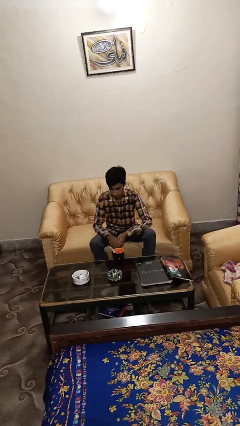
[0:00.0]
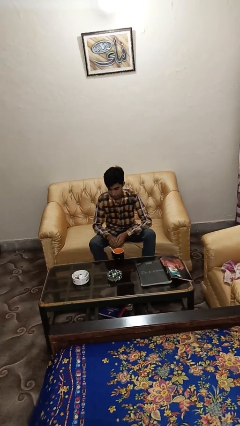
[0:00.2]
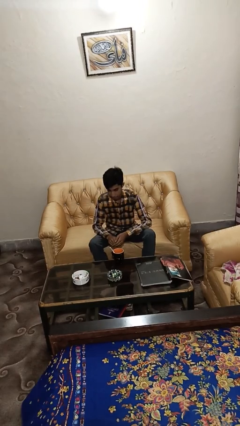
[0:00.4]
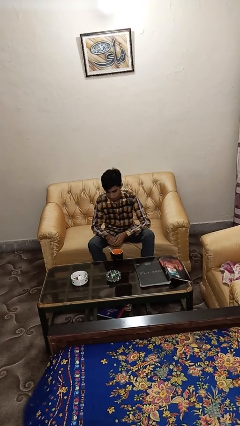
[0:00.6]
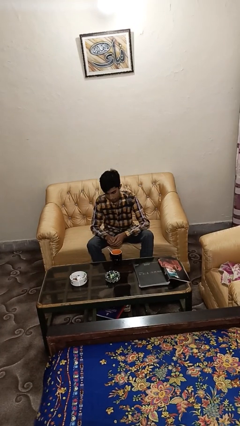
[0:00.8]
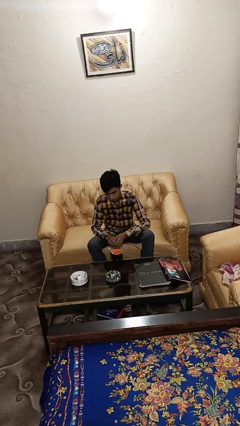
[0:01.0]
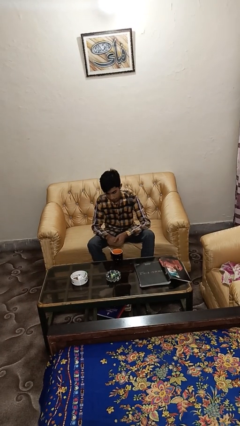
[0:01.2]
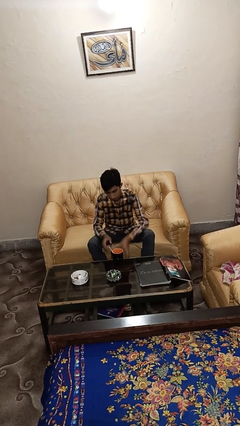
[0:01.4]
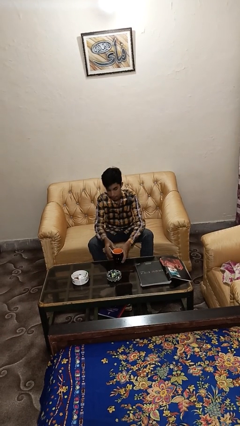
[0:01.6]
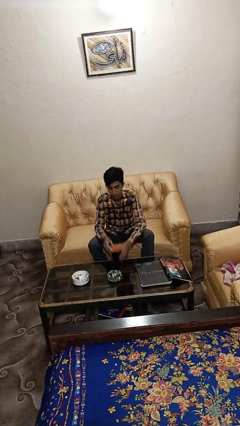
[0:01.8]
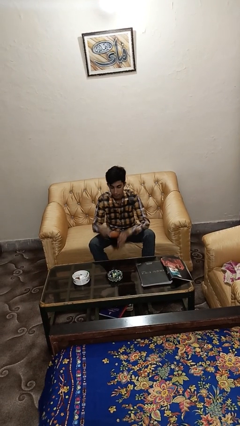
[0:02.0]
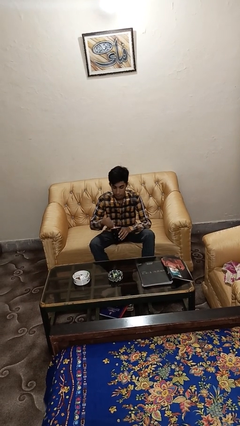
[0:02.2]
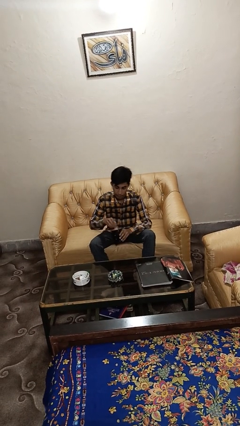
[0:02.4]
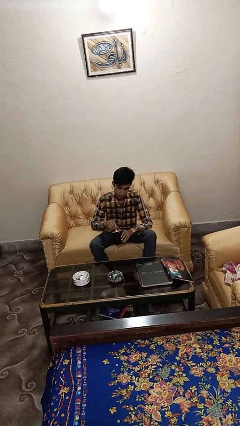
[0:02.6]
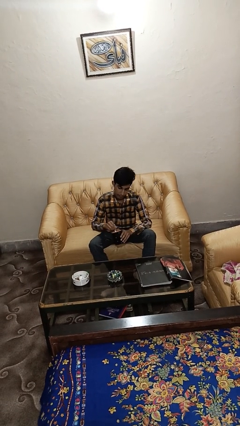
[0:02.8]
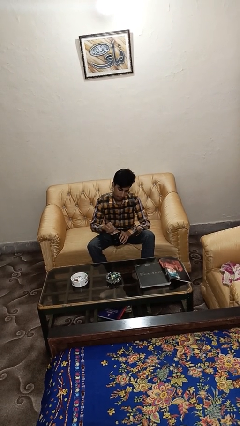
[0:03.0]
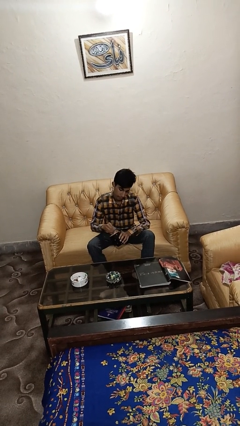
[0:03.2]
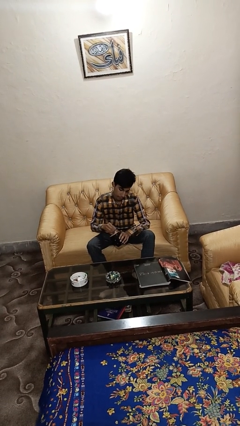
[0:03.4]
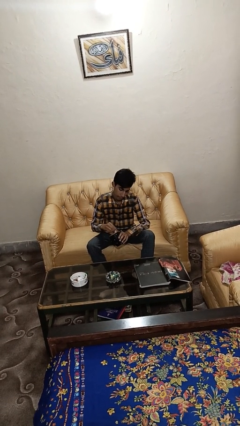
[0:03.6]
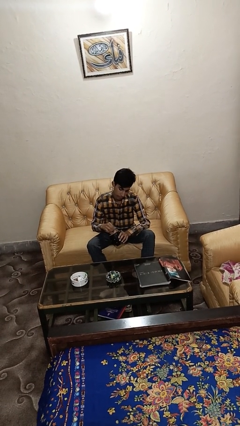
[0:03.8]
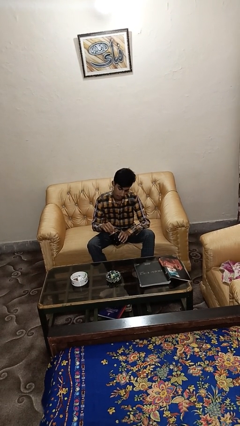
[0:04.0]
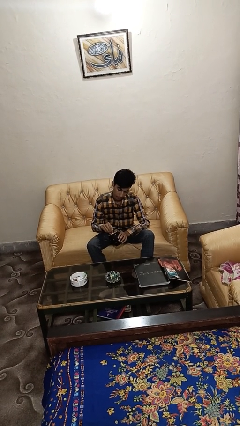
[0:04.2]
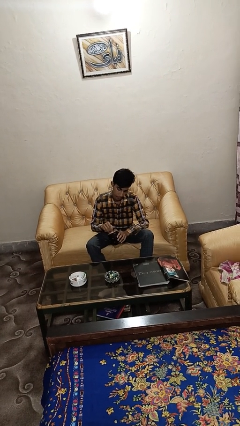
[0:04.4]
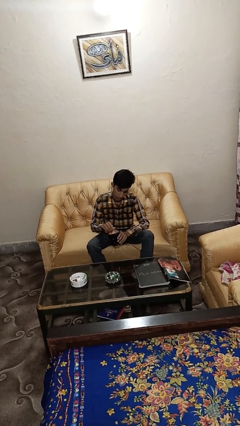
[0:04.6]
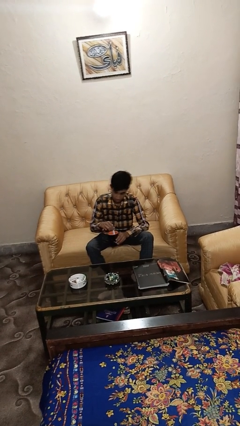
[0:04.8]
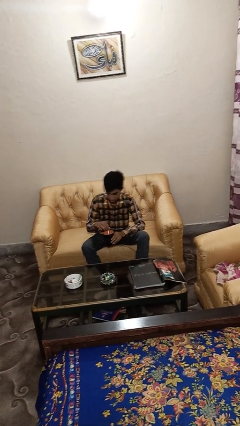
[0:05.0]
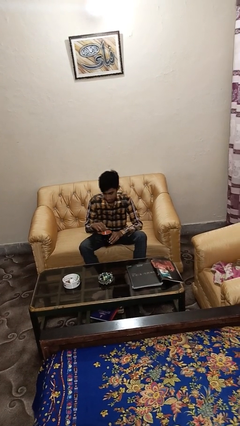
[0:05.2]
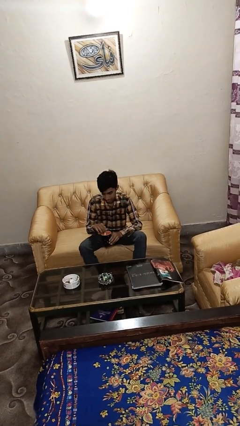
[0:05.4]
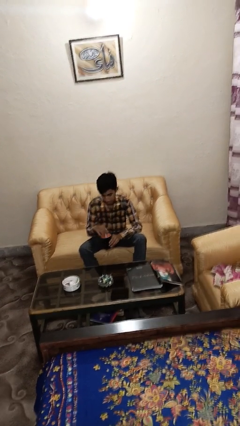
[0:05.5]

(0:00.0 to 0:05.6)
person stirs mug

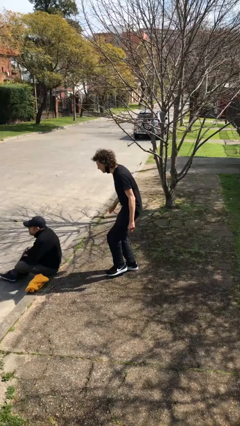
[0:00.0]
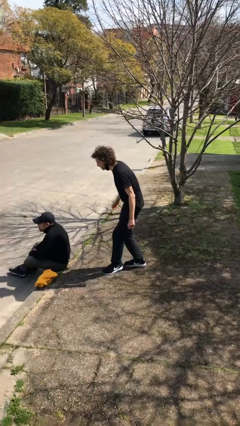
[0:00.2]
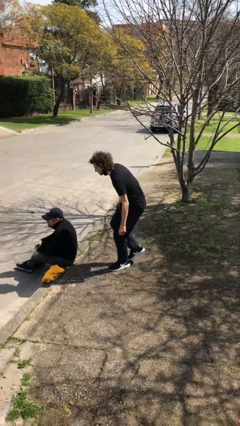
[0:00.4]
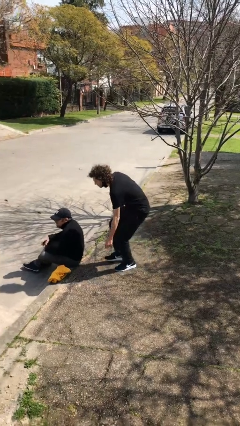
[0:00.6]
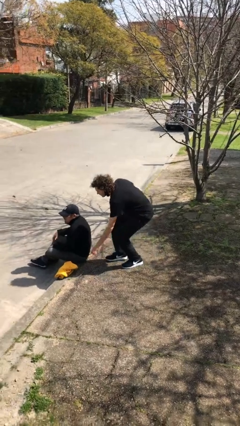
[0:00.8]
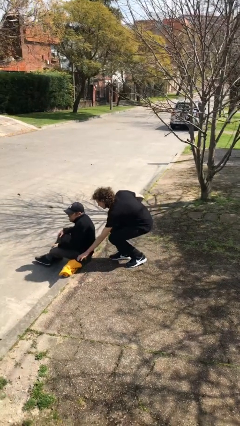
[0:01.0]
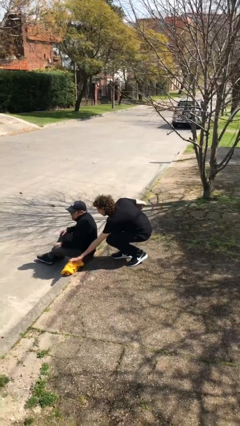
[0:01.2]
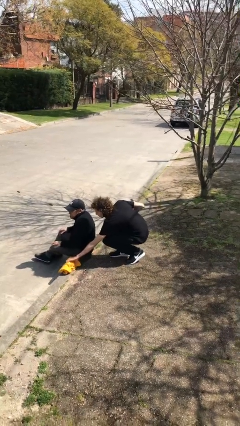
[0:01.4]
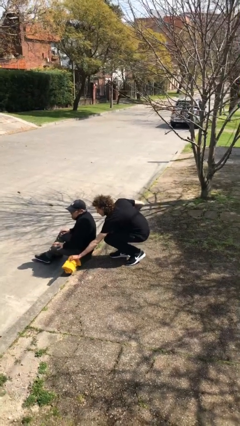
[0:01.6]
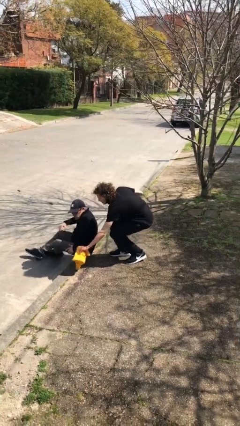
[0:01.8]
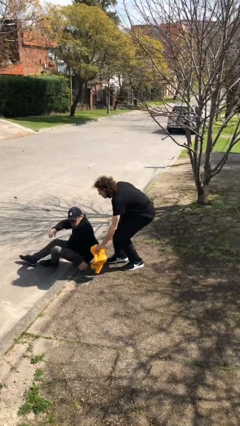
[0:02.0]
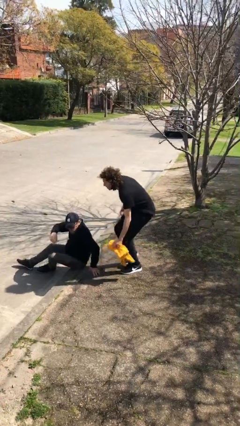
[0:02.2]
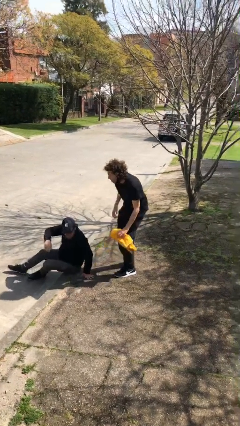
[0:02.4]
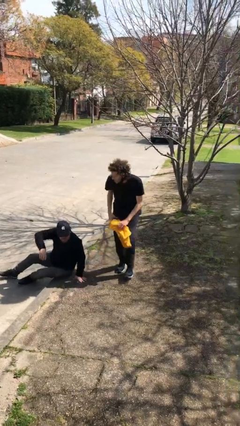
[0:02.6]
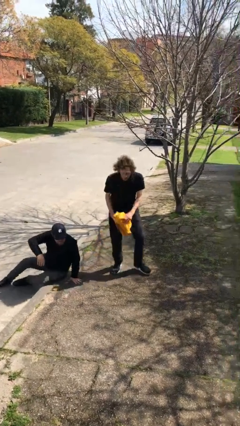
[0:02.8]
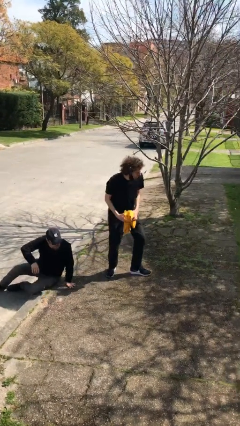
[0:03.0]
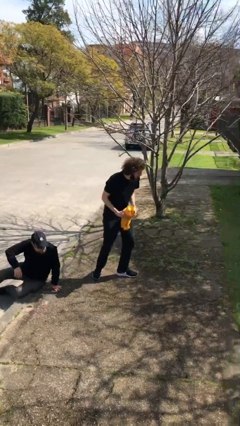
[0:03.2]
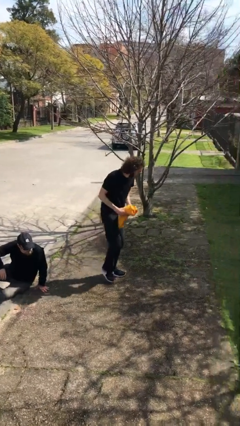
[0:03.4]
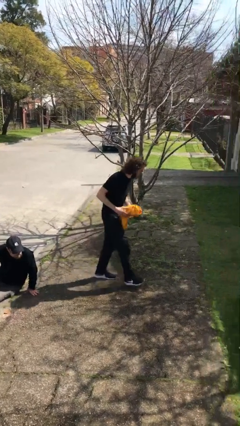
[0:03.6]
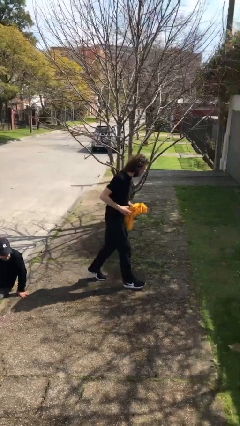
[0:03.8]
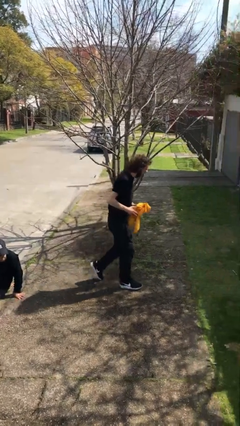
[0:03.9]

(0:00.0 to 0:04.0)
person steals object from person

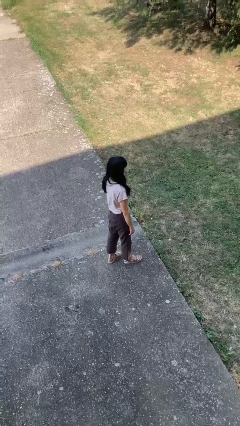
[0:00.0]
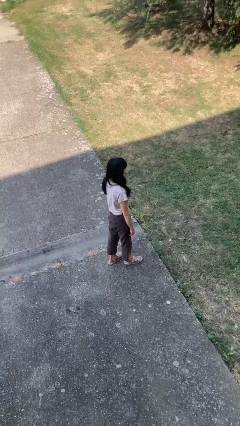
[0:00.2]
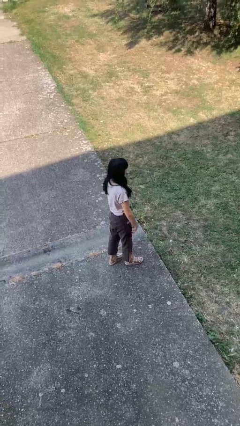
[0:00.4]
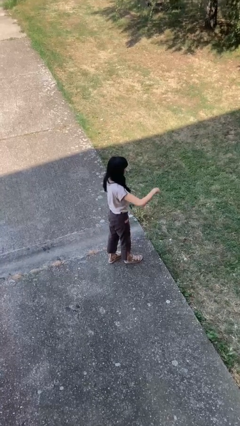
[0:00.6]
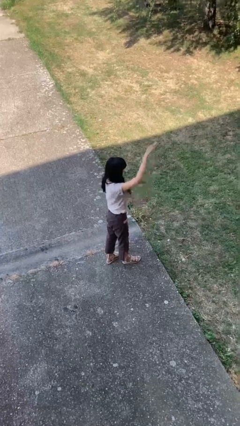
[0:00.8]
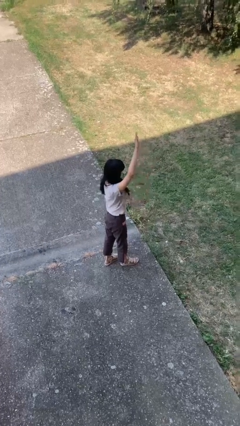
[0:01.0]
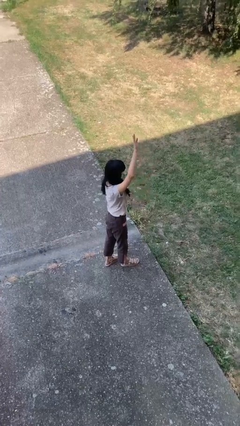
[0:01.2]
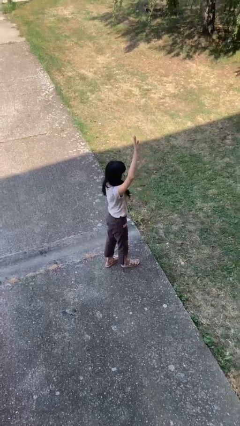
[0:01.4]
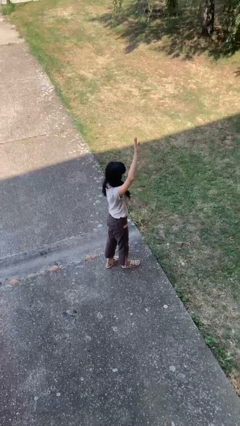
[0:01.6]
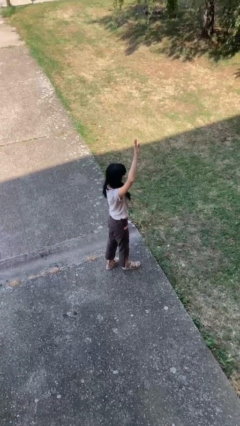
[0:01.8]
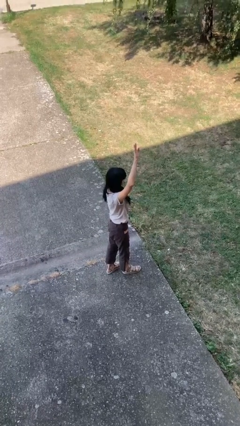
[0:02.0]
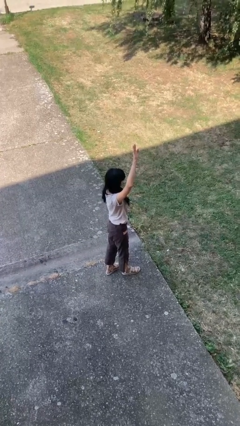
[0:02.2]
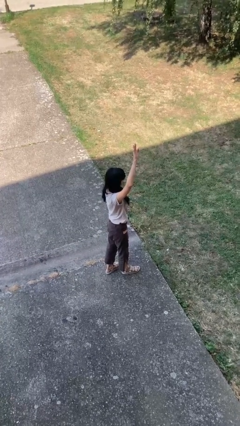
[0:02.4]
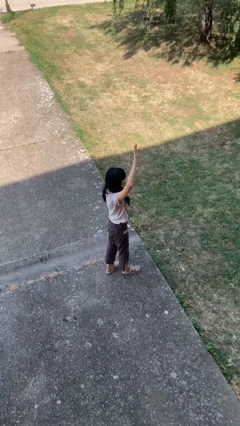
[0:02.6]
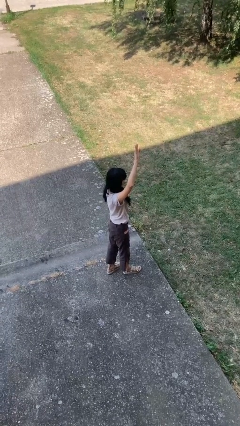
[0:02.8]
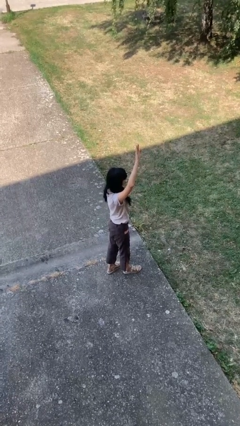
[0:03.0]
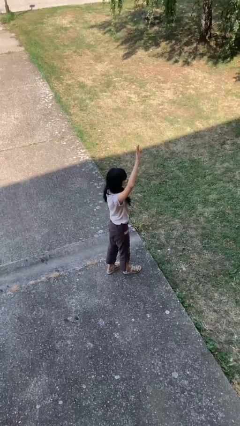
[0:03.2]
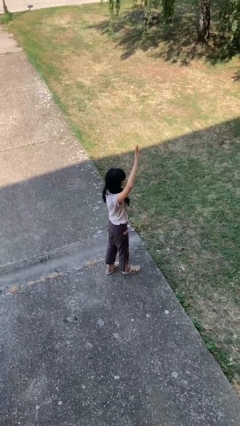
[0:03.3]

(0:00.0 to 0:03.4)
person gestures raise hand

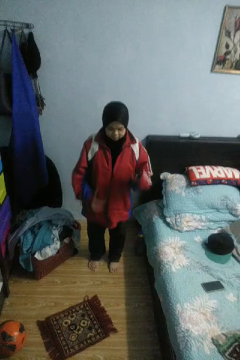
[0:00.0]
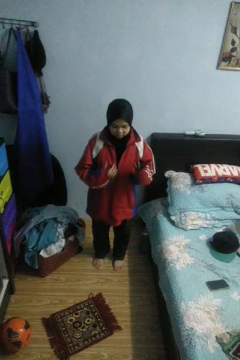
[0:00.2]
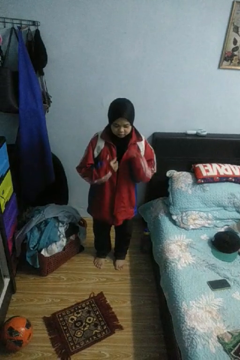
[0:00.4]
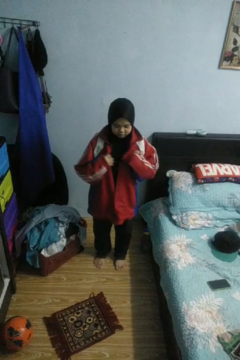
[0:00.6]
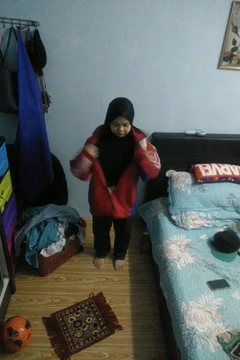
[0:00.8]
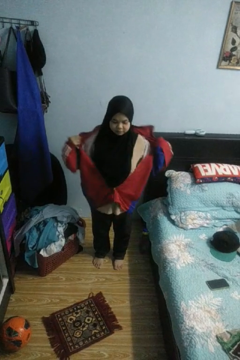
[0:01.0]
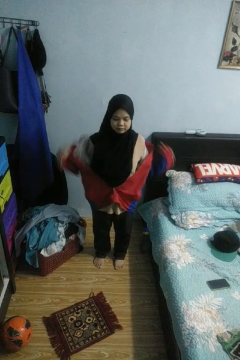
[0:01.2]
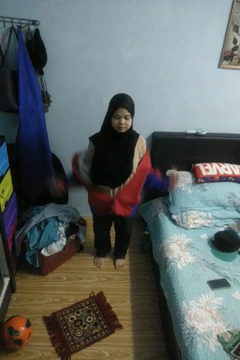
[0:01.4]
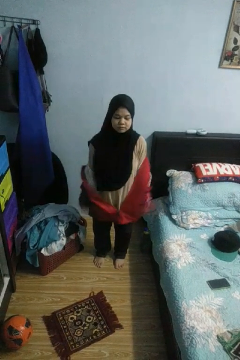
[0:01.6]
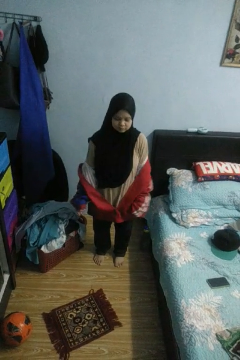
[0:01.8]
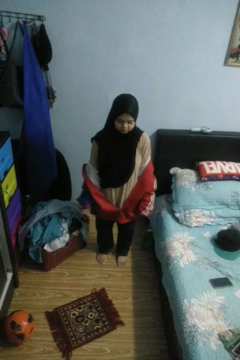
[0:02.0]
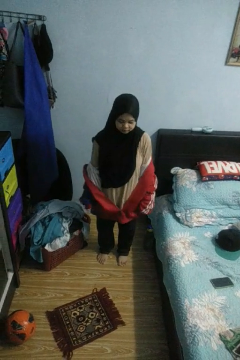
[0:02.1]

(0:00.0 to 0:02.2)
person takes off jacket

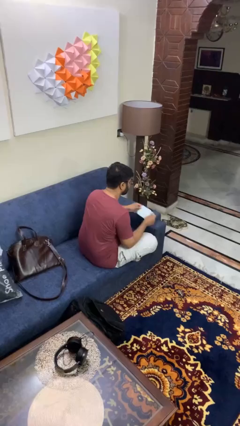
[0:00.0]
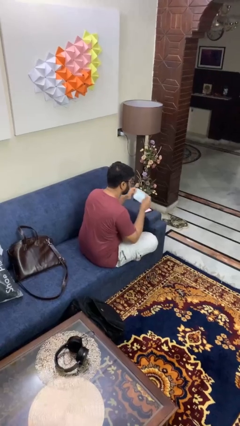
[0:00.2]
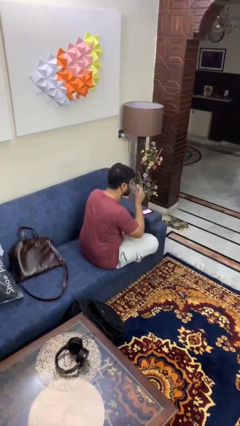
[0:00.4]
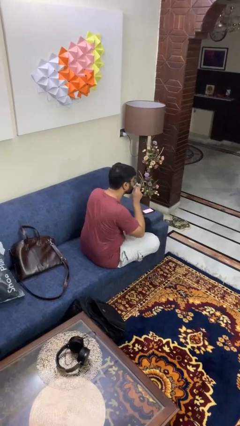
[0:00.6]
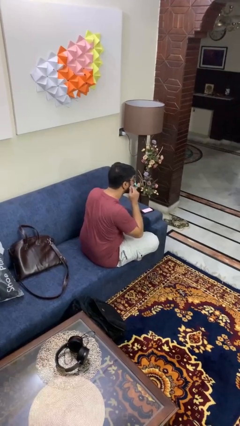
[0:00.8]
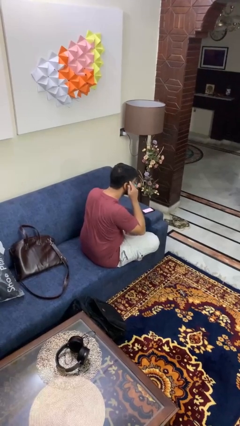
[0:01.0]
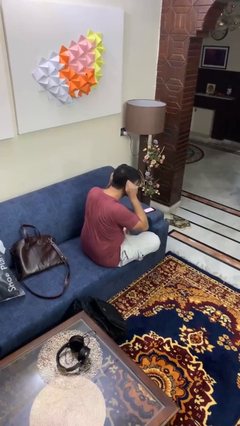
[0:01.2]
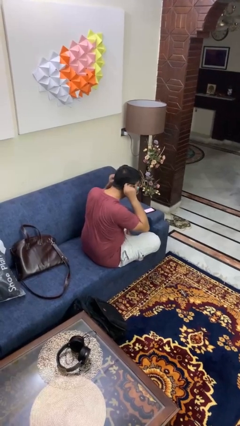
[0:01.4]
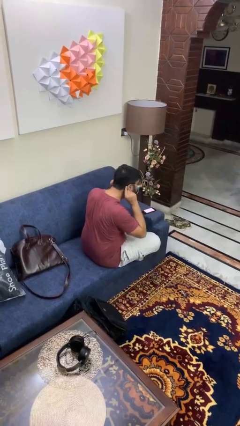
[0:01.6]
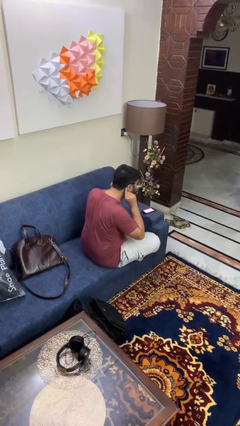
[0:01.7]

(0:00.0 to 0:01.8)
person puts on facemask

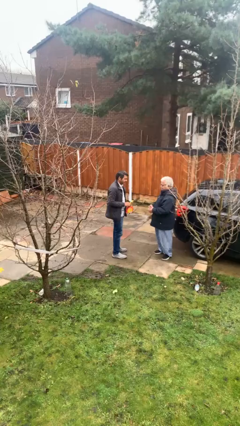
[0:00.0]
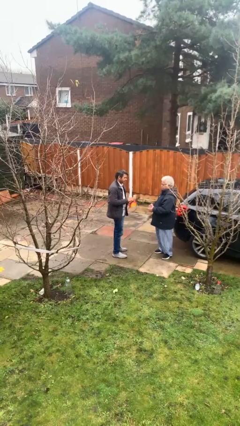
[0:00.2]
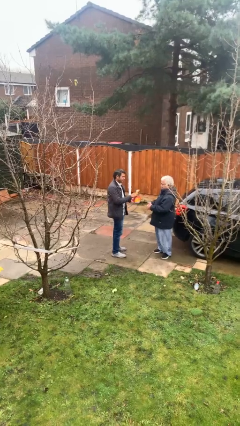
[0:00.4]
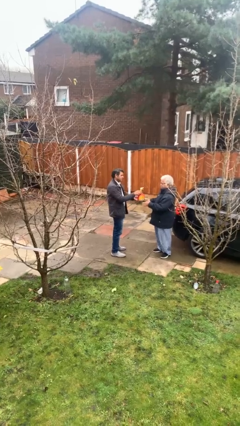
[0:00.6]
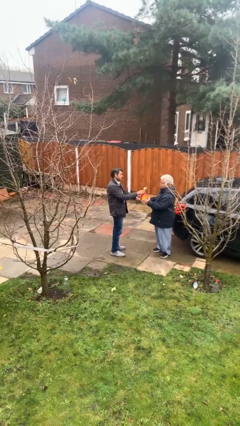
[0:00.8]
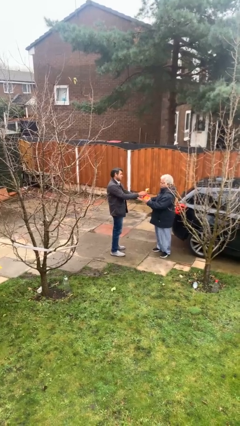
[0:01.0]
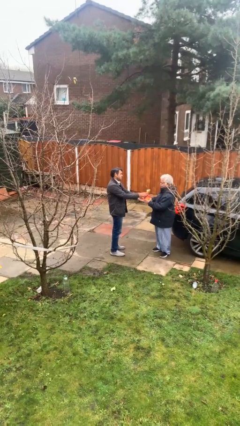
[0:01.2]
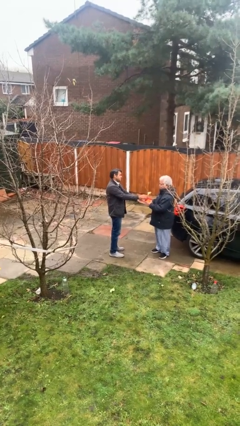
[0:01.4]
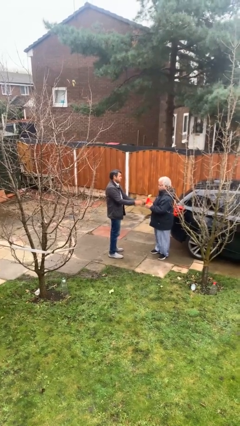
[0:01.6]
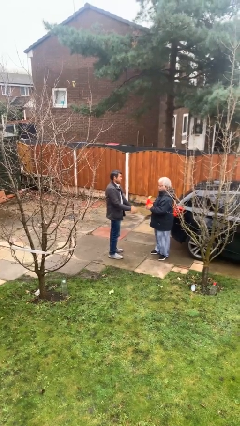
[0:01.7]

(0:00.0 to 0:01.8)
person transfers object to person
